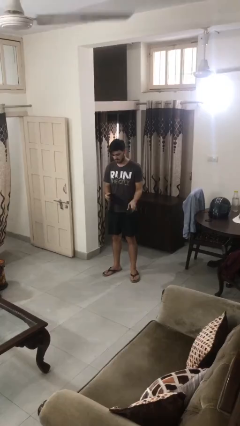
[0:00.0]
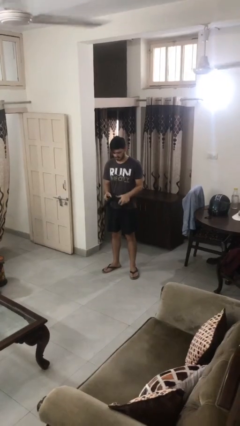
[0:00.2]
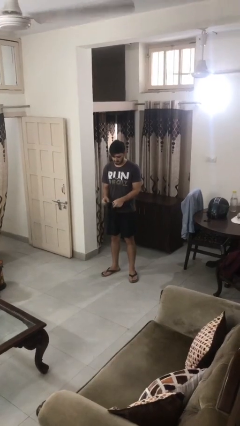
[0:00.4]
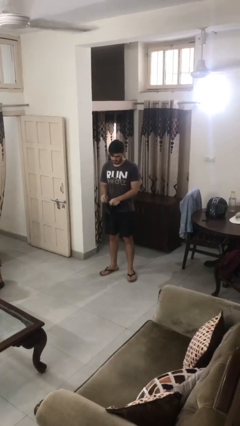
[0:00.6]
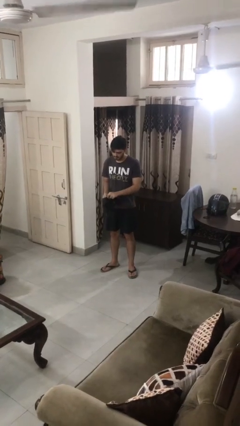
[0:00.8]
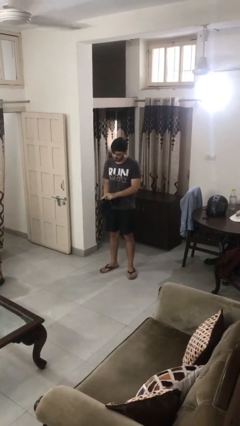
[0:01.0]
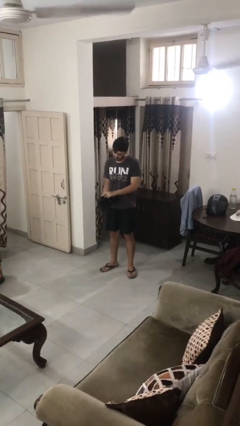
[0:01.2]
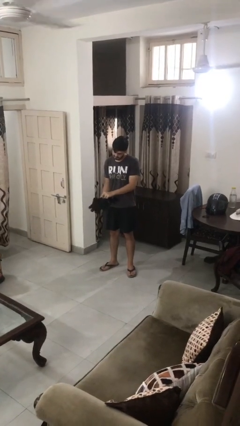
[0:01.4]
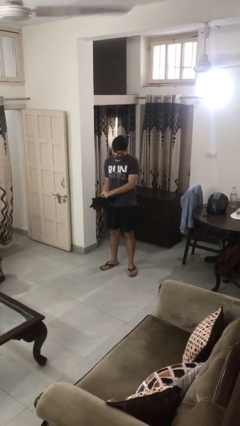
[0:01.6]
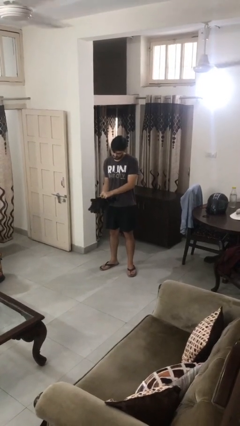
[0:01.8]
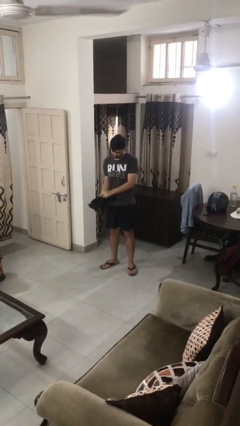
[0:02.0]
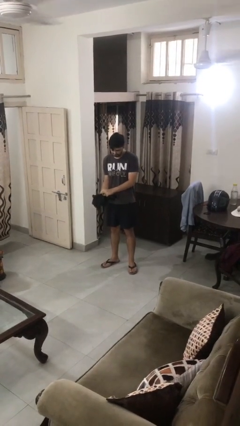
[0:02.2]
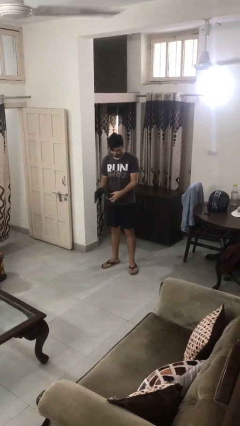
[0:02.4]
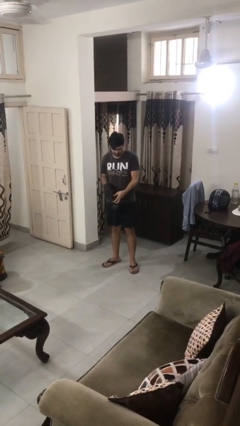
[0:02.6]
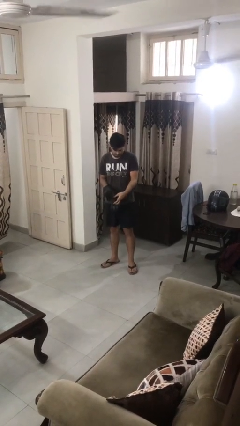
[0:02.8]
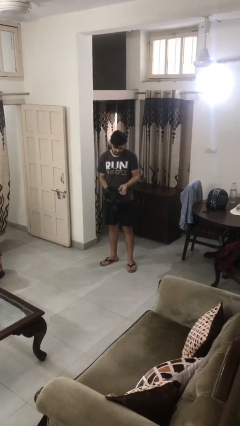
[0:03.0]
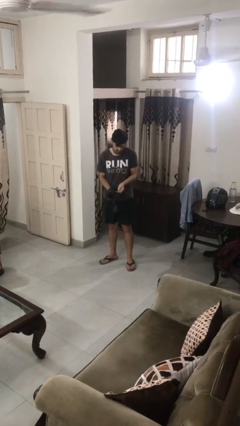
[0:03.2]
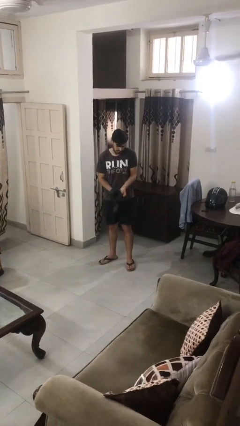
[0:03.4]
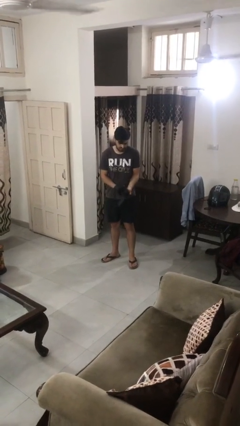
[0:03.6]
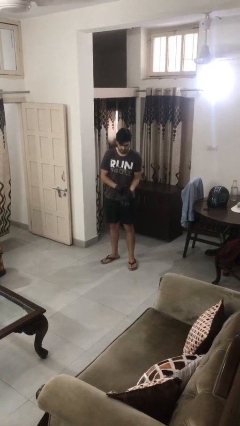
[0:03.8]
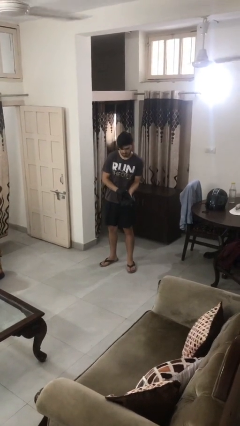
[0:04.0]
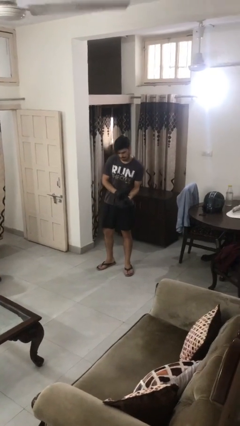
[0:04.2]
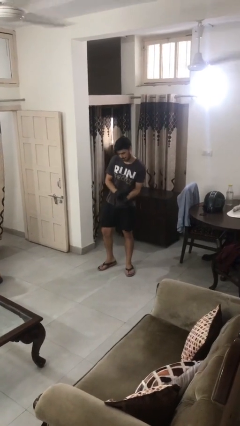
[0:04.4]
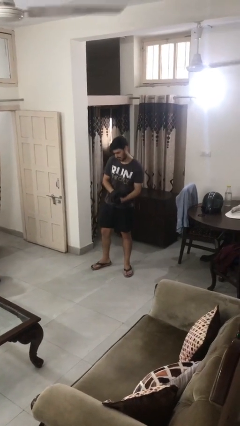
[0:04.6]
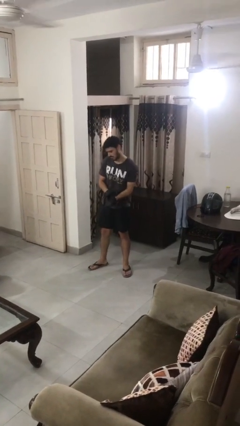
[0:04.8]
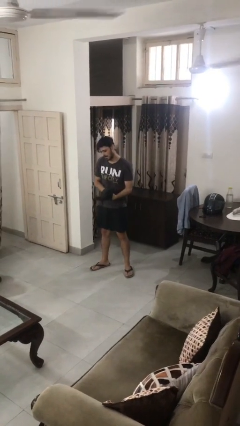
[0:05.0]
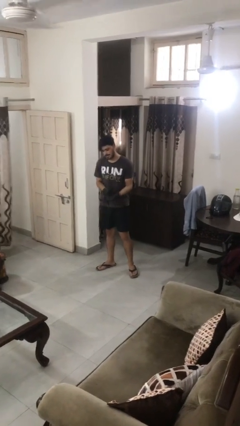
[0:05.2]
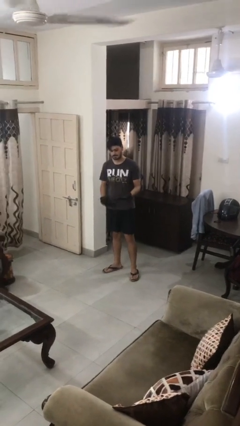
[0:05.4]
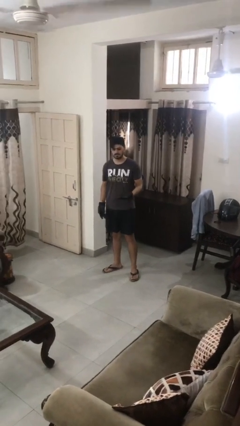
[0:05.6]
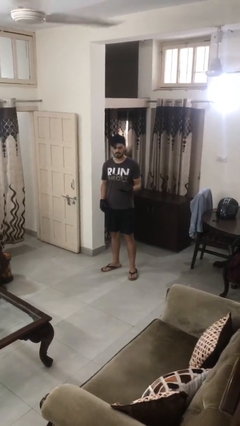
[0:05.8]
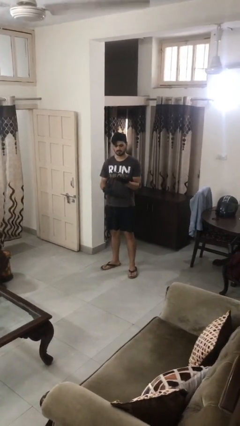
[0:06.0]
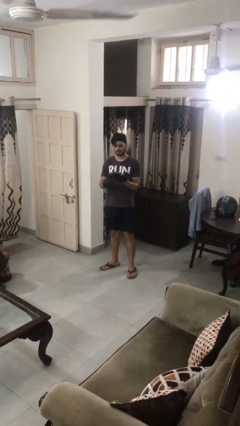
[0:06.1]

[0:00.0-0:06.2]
person puts on gloves

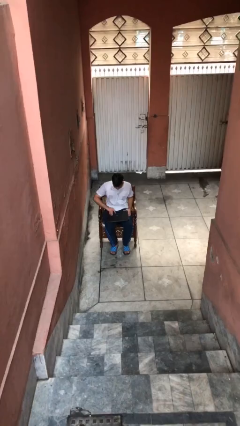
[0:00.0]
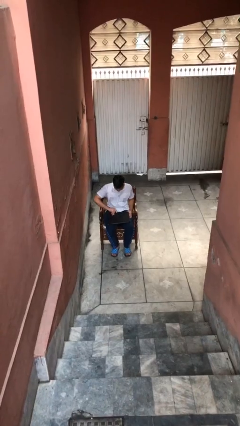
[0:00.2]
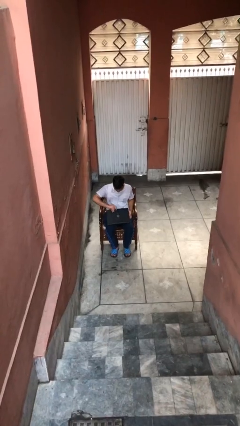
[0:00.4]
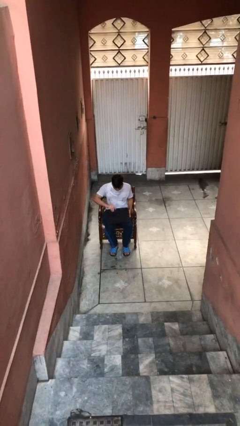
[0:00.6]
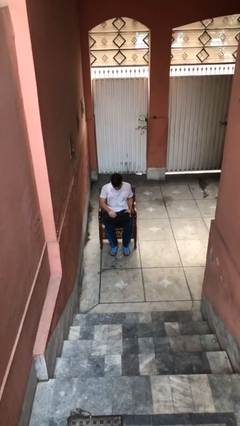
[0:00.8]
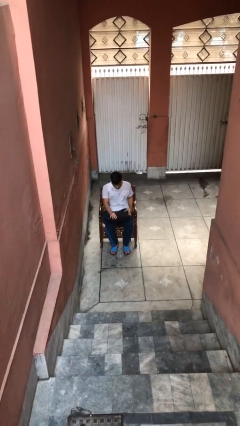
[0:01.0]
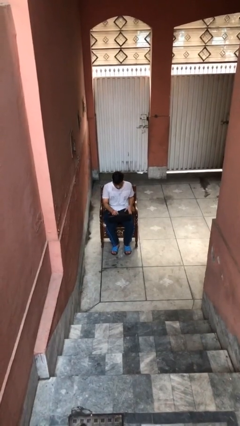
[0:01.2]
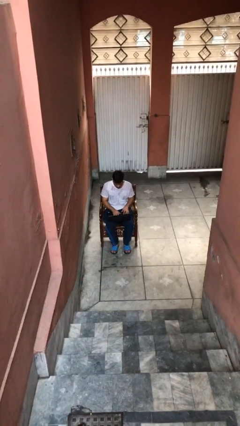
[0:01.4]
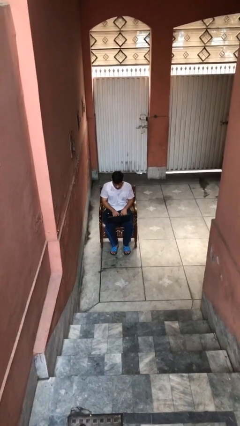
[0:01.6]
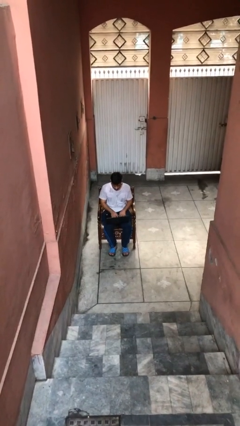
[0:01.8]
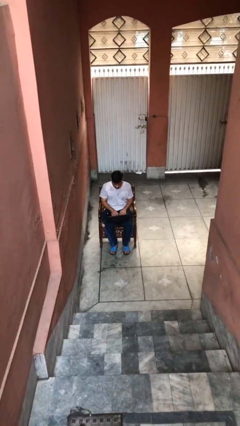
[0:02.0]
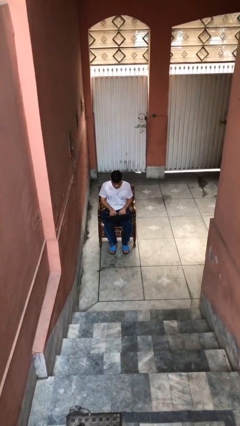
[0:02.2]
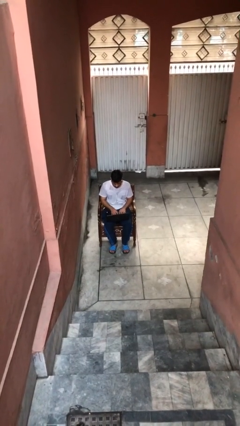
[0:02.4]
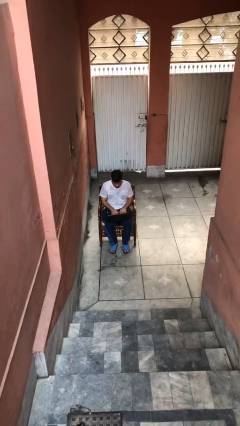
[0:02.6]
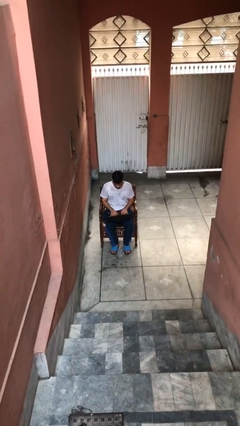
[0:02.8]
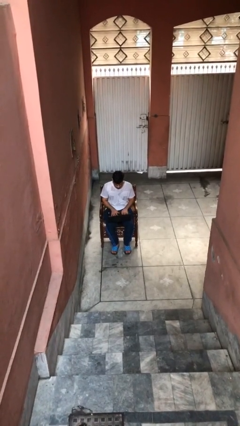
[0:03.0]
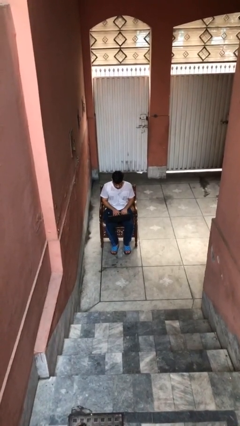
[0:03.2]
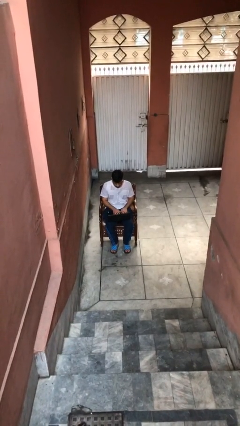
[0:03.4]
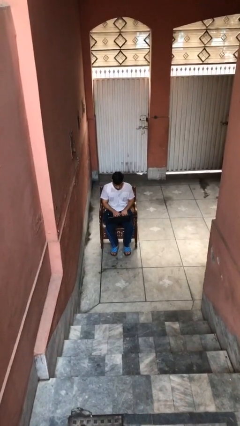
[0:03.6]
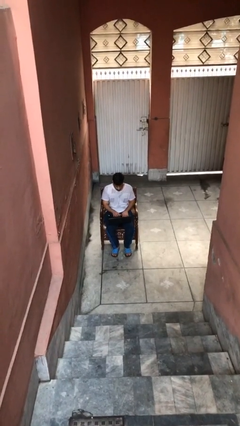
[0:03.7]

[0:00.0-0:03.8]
person interacts with laptop

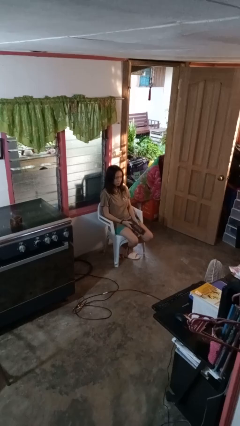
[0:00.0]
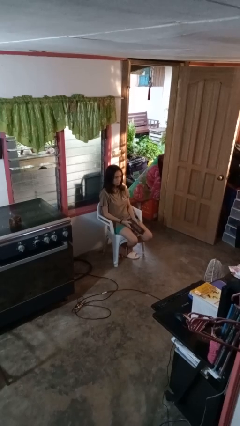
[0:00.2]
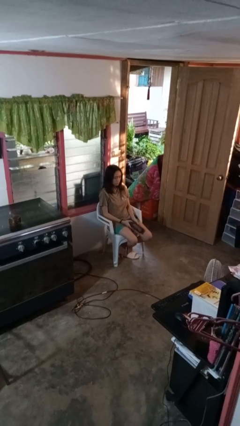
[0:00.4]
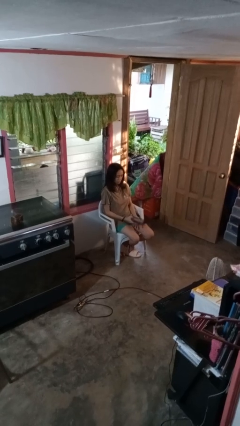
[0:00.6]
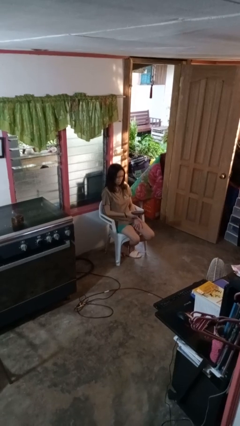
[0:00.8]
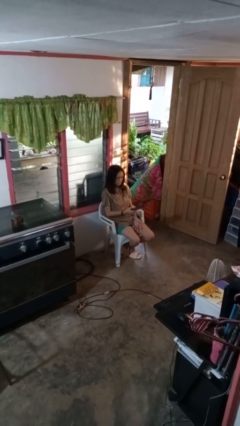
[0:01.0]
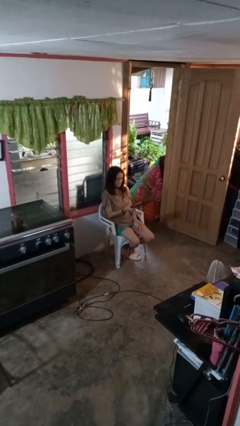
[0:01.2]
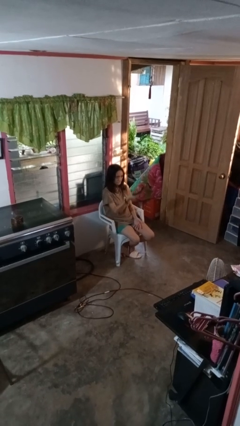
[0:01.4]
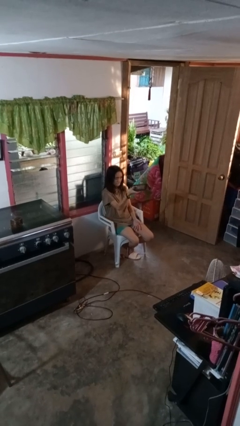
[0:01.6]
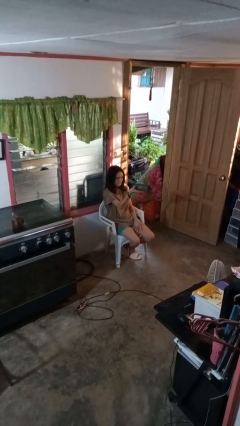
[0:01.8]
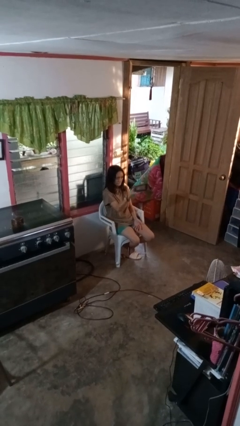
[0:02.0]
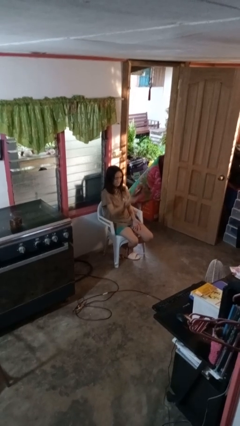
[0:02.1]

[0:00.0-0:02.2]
person uses television remote

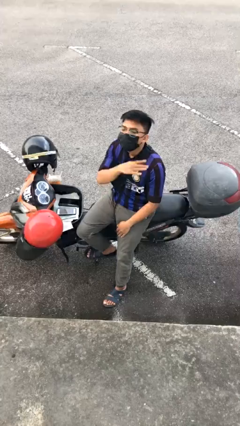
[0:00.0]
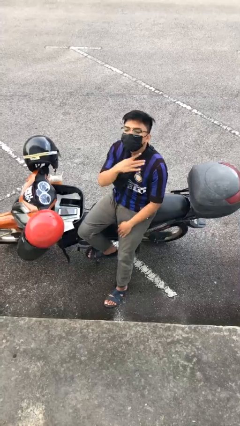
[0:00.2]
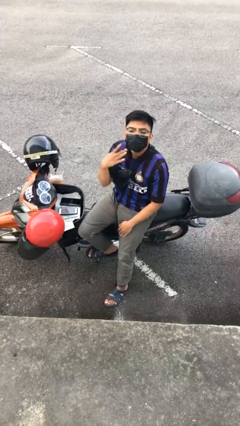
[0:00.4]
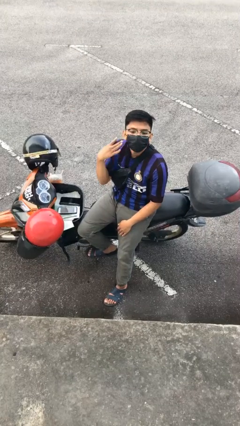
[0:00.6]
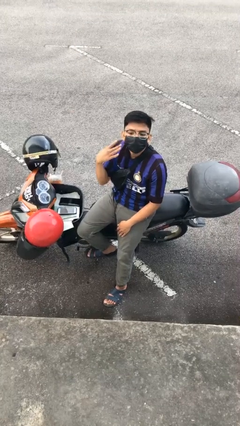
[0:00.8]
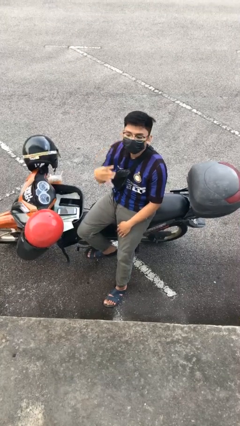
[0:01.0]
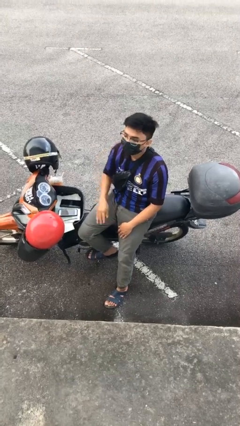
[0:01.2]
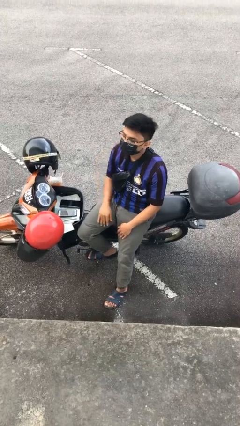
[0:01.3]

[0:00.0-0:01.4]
person gestures cut

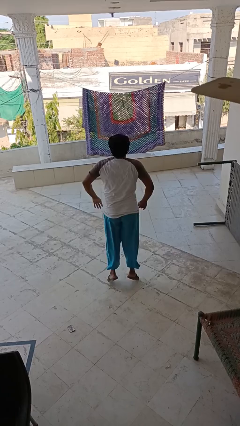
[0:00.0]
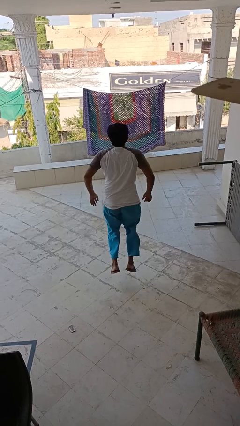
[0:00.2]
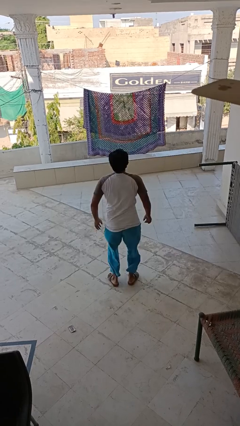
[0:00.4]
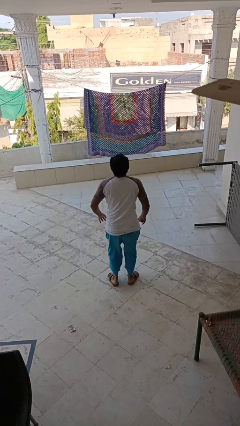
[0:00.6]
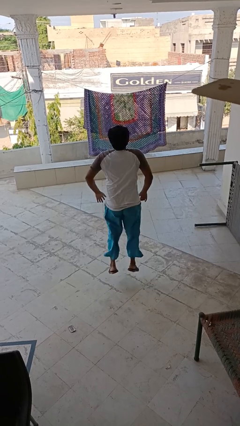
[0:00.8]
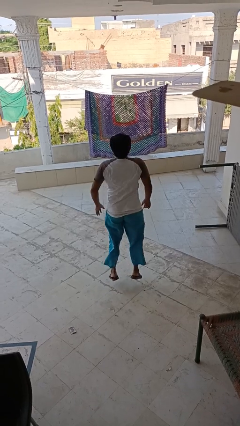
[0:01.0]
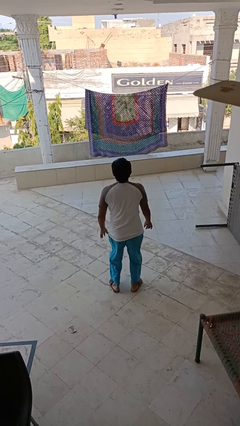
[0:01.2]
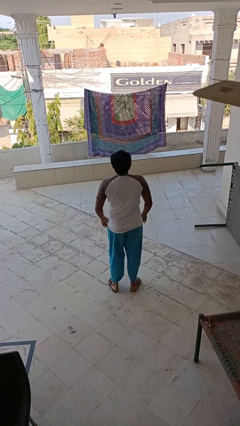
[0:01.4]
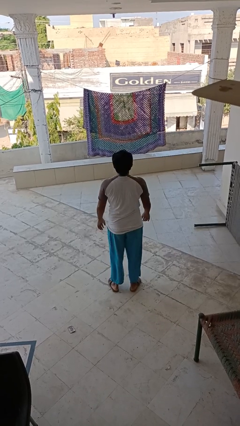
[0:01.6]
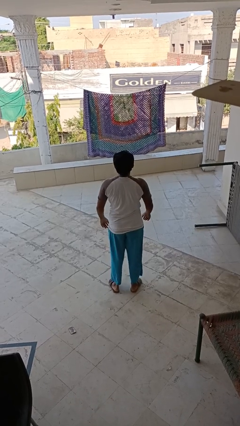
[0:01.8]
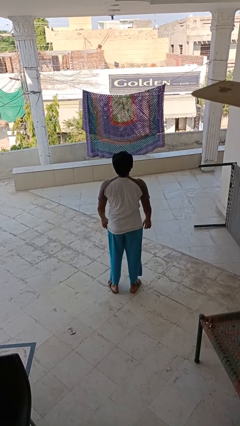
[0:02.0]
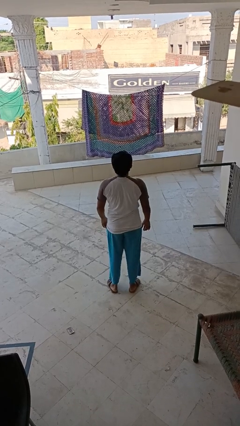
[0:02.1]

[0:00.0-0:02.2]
person jumps

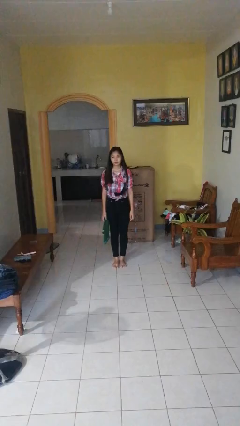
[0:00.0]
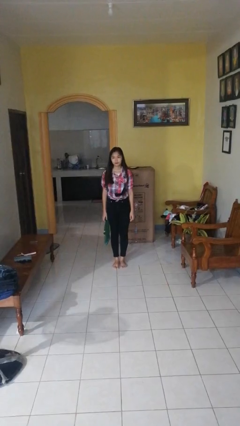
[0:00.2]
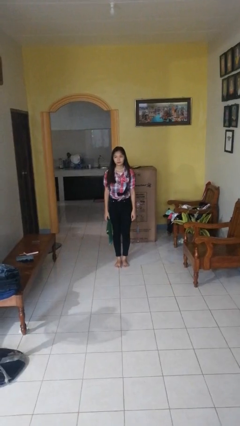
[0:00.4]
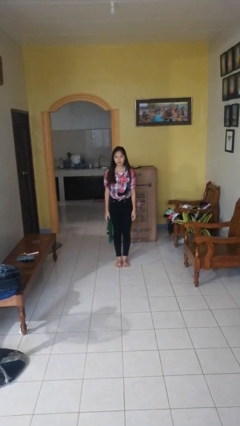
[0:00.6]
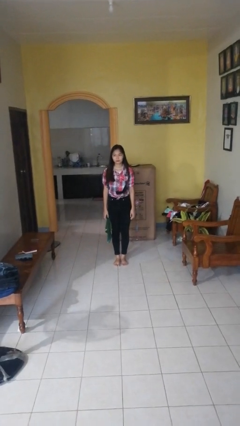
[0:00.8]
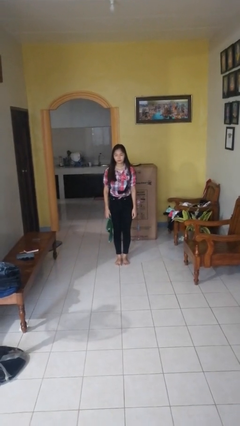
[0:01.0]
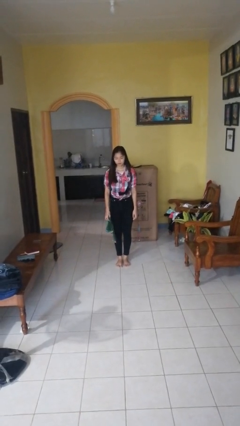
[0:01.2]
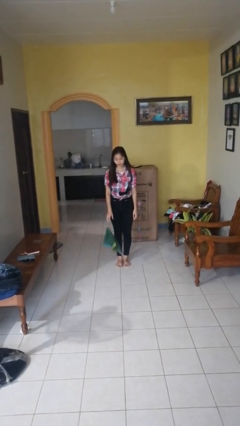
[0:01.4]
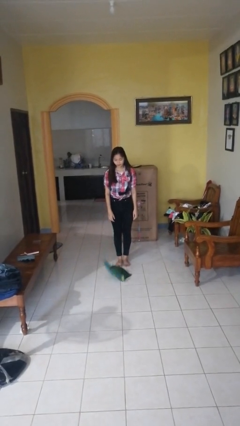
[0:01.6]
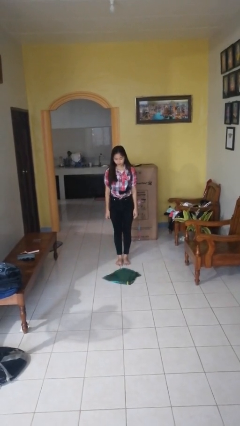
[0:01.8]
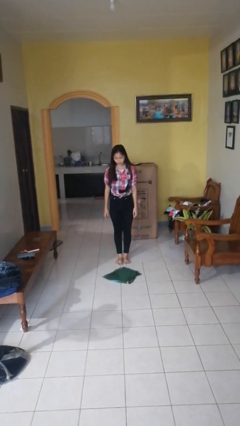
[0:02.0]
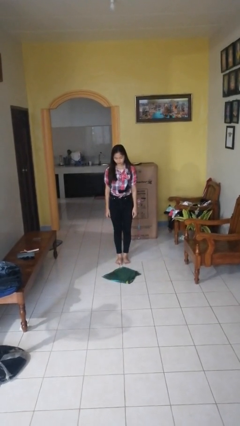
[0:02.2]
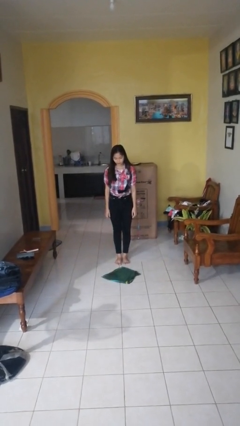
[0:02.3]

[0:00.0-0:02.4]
person throws object into air
